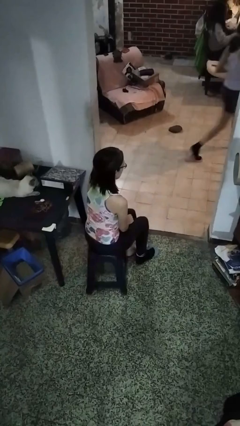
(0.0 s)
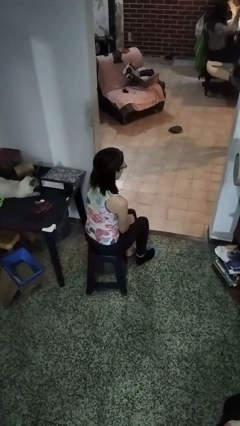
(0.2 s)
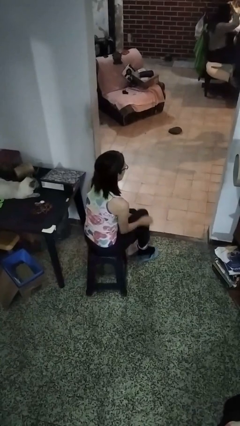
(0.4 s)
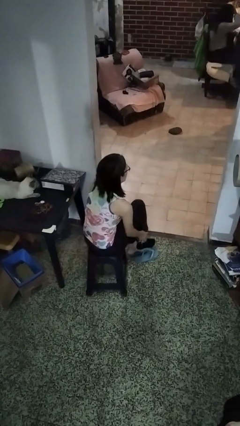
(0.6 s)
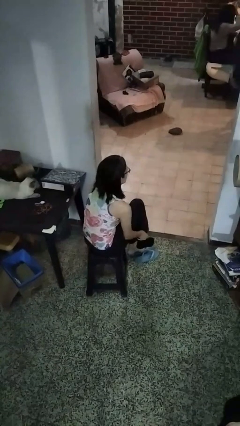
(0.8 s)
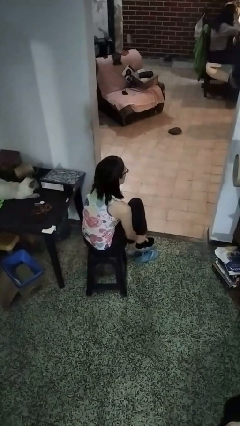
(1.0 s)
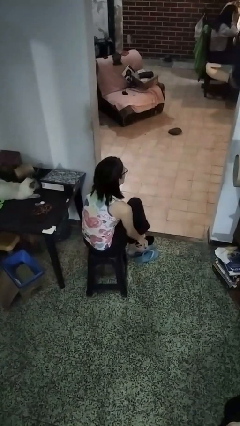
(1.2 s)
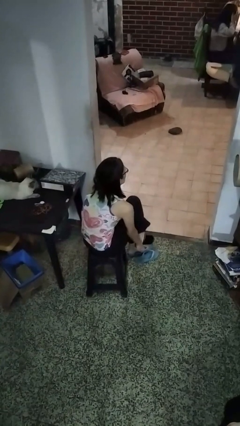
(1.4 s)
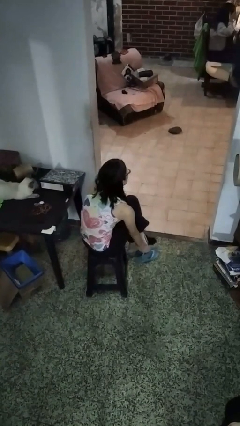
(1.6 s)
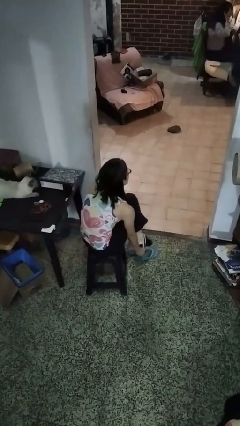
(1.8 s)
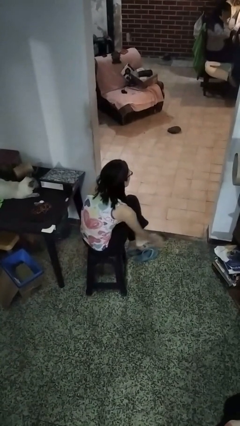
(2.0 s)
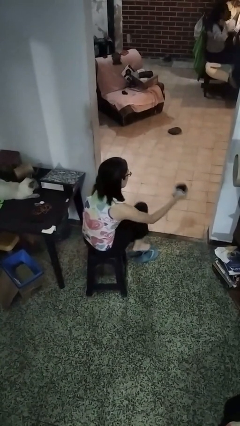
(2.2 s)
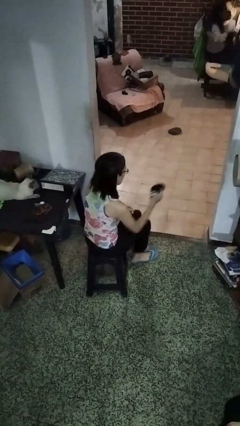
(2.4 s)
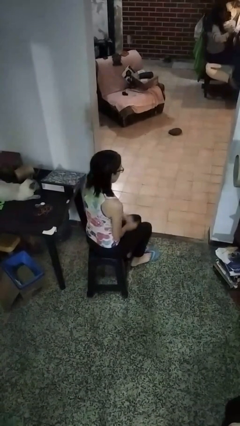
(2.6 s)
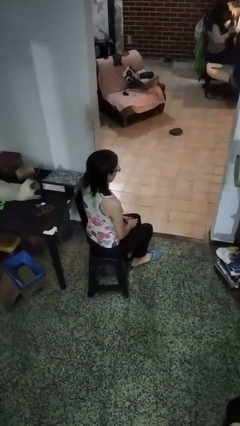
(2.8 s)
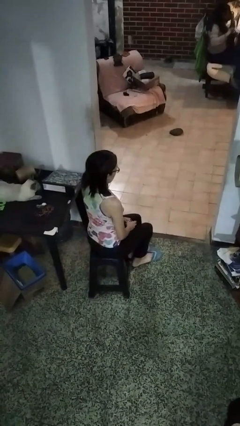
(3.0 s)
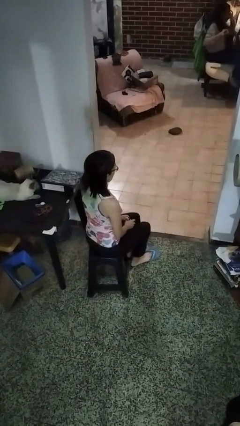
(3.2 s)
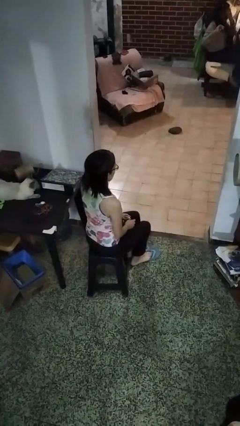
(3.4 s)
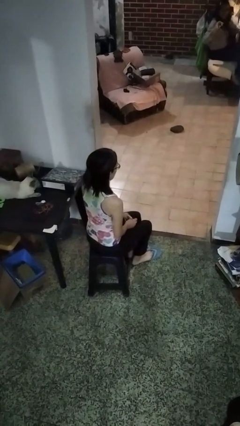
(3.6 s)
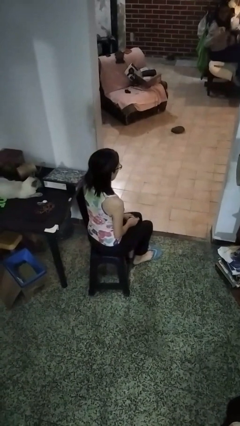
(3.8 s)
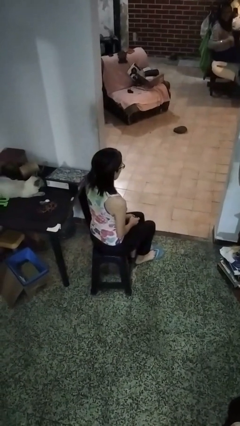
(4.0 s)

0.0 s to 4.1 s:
person takes off socks

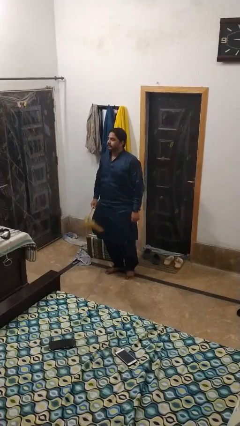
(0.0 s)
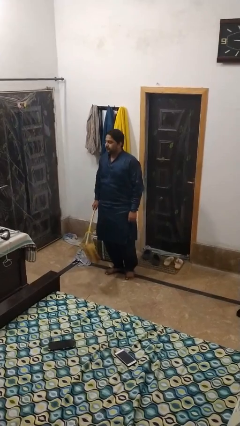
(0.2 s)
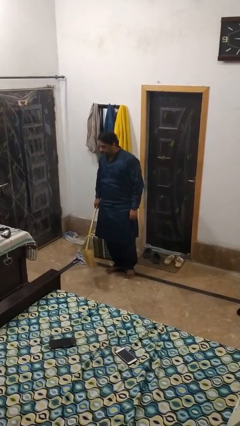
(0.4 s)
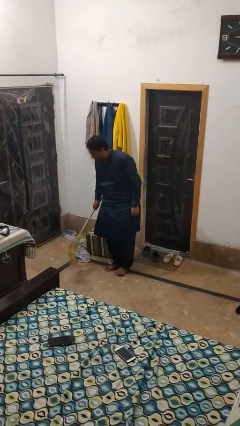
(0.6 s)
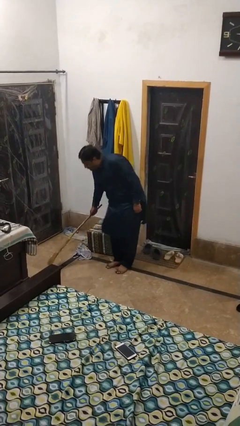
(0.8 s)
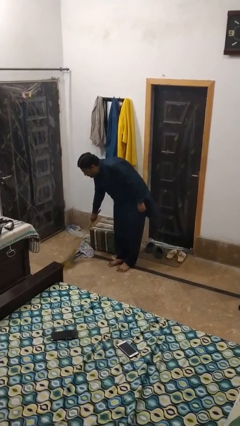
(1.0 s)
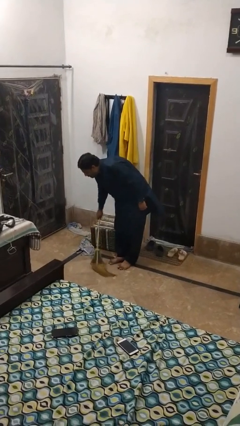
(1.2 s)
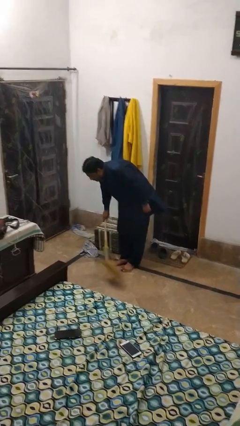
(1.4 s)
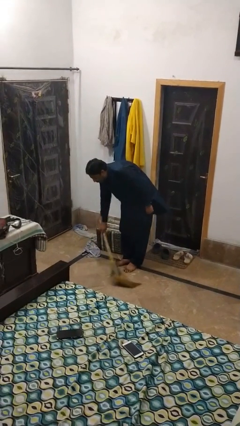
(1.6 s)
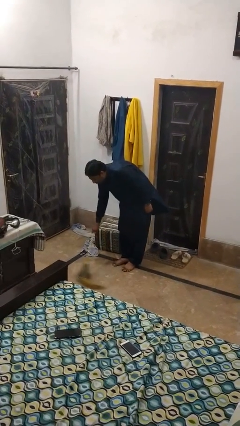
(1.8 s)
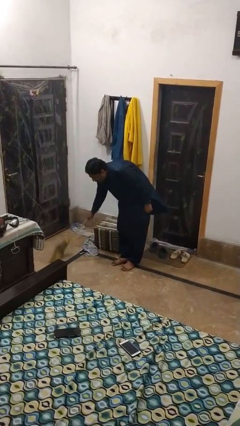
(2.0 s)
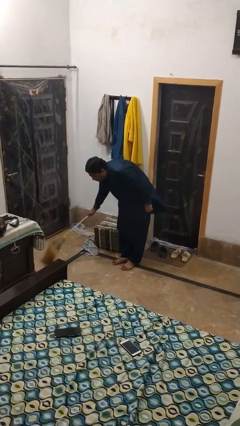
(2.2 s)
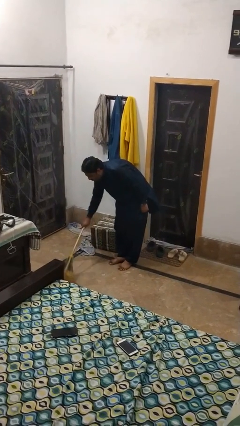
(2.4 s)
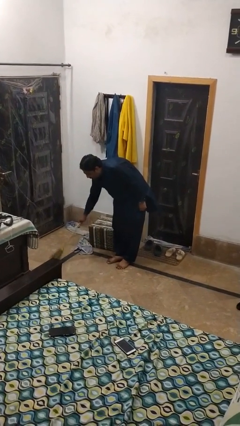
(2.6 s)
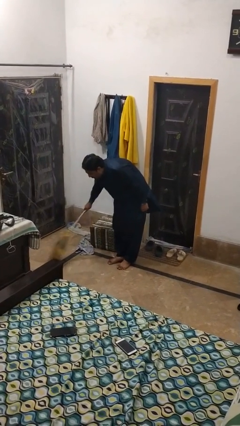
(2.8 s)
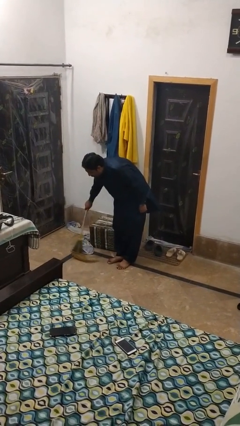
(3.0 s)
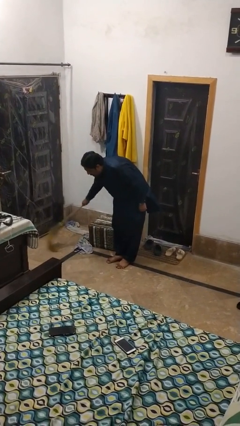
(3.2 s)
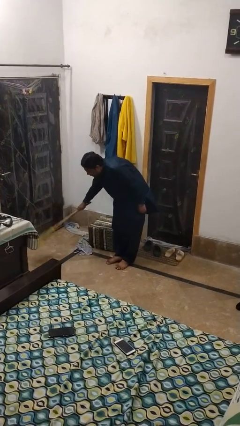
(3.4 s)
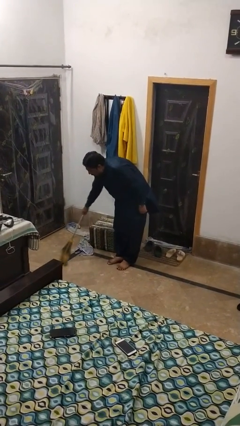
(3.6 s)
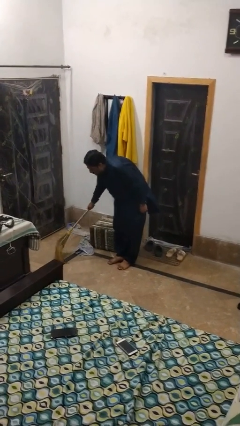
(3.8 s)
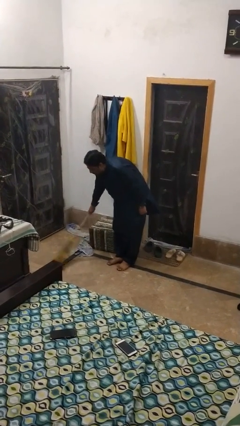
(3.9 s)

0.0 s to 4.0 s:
person sweeps floor

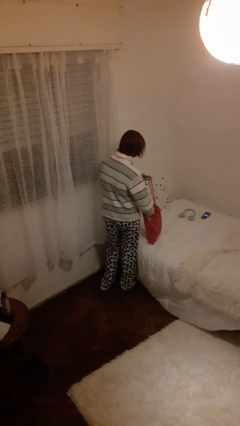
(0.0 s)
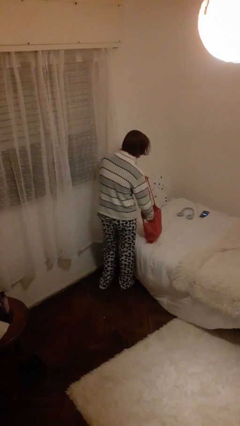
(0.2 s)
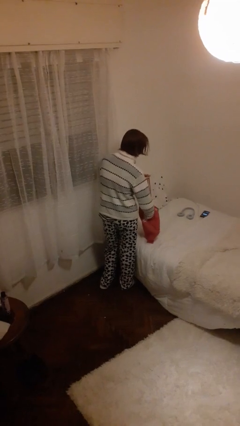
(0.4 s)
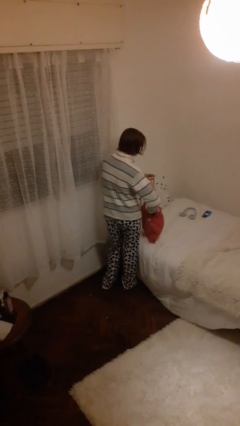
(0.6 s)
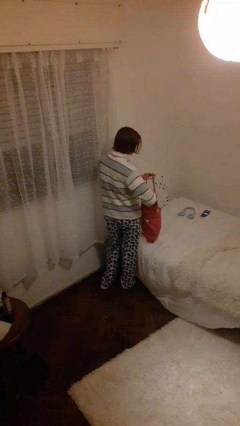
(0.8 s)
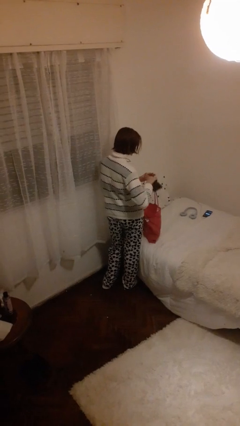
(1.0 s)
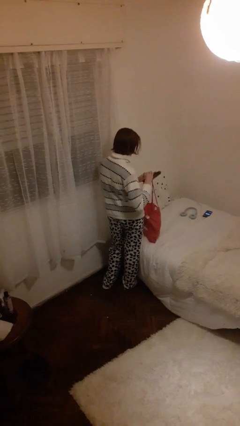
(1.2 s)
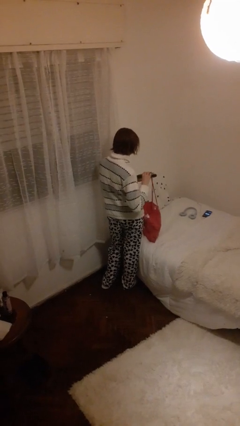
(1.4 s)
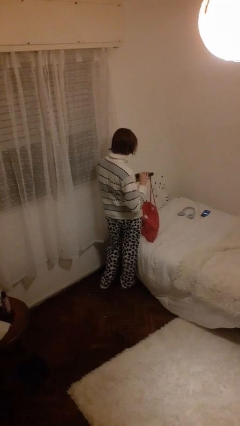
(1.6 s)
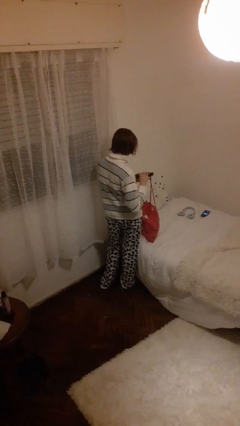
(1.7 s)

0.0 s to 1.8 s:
person takes object from bag

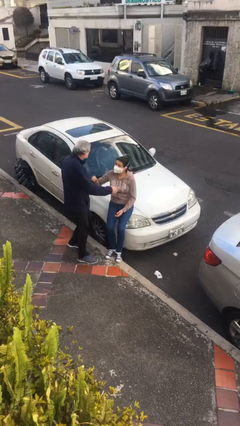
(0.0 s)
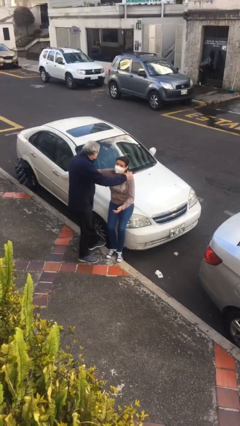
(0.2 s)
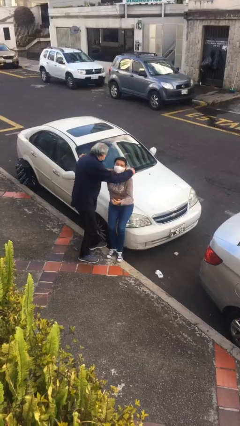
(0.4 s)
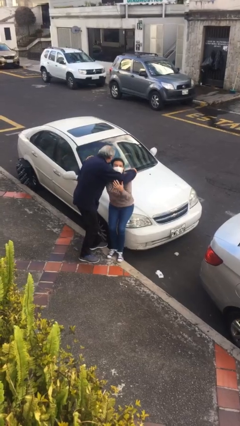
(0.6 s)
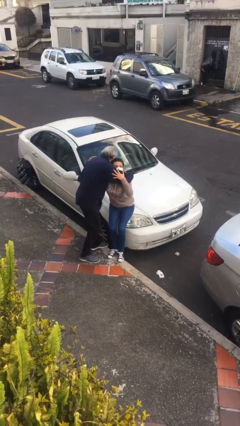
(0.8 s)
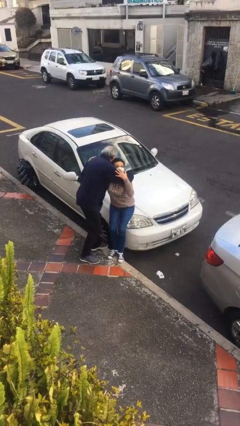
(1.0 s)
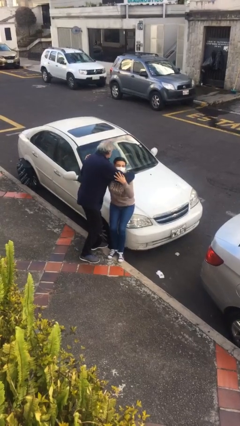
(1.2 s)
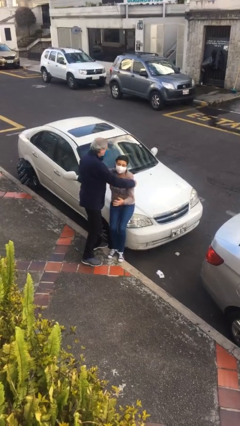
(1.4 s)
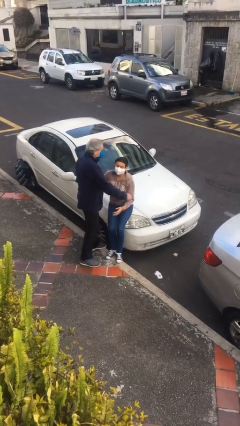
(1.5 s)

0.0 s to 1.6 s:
person embraces person

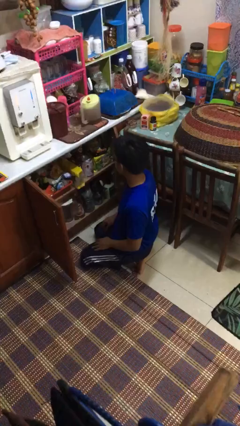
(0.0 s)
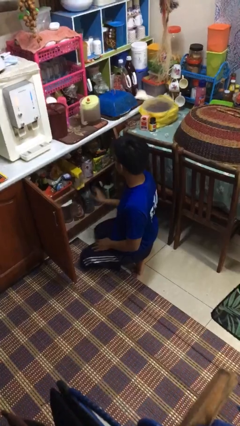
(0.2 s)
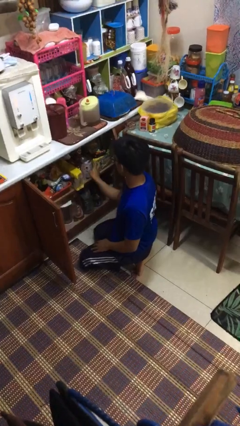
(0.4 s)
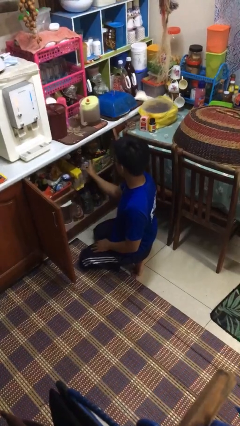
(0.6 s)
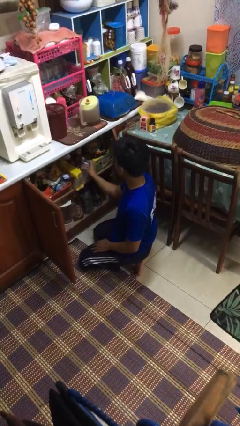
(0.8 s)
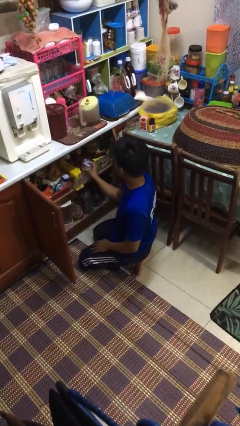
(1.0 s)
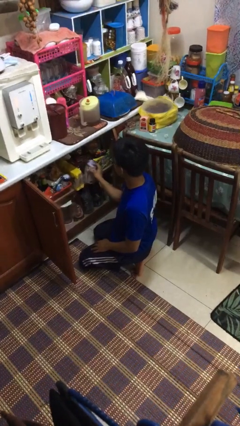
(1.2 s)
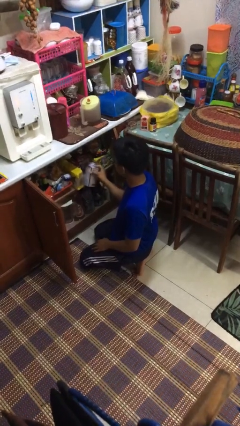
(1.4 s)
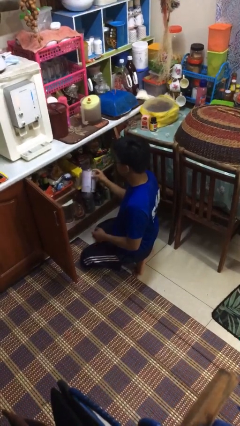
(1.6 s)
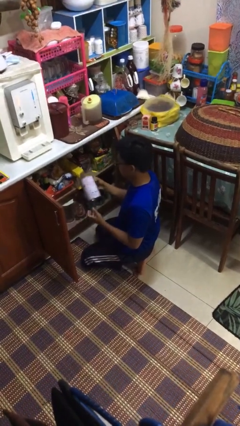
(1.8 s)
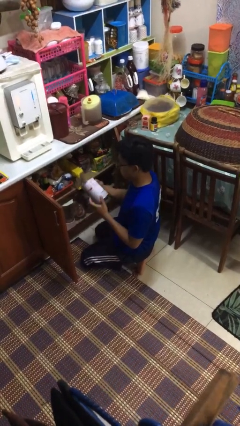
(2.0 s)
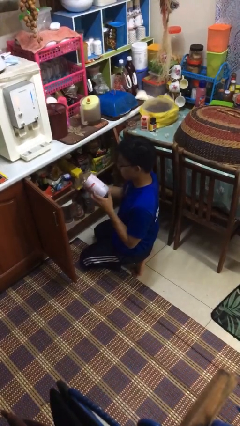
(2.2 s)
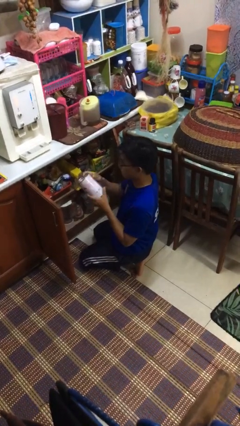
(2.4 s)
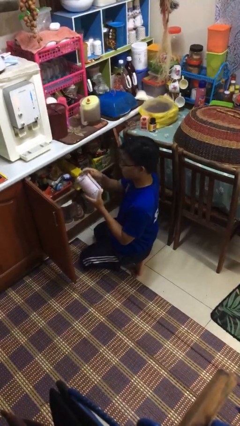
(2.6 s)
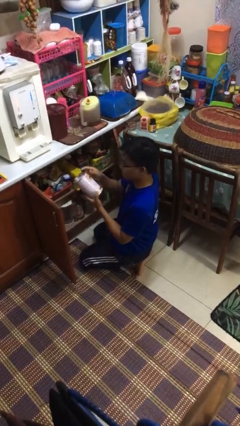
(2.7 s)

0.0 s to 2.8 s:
person takes object from cabinet

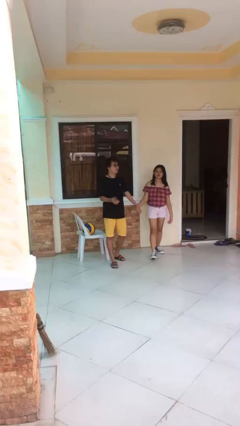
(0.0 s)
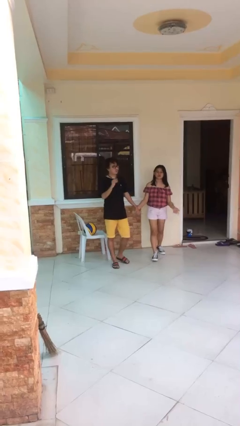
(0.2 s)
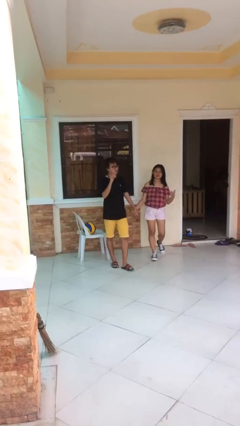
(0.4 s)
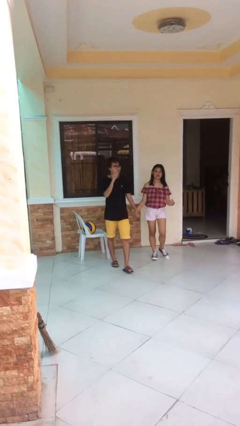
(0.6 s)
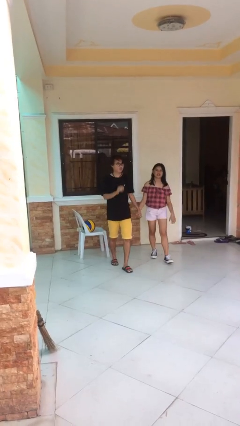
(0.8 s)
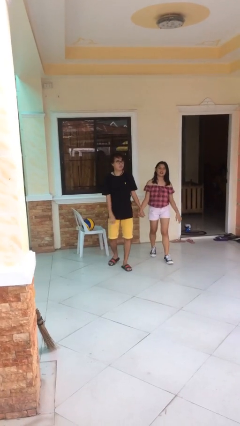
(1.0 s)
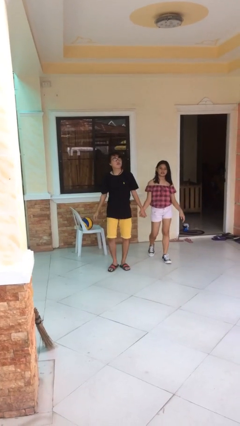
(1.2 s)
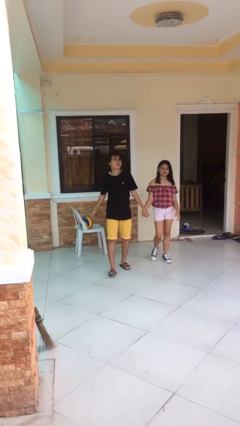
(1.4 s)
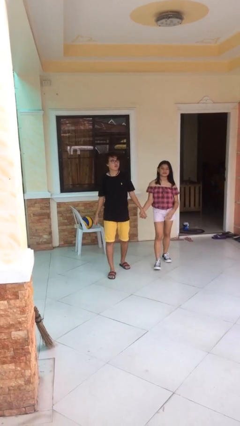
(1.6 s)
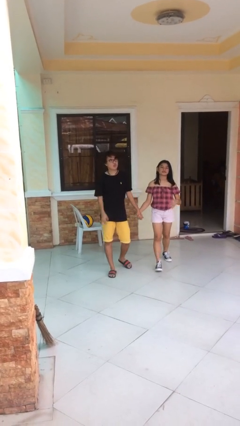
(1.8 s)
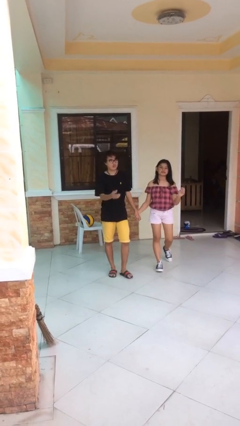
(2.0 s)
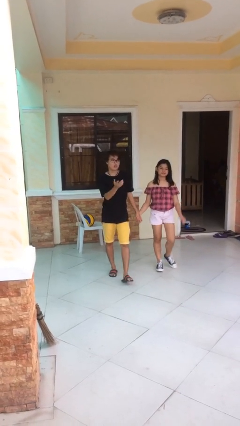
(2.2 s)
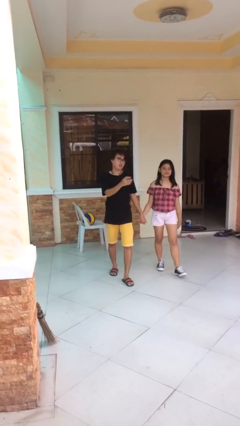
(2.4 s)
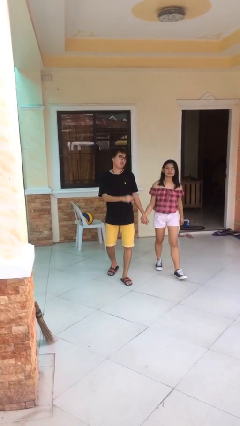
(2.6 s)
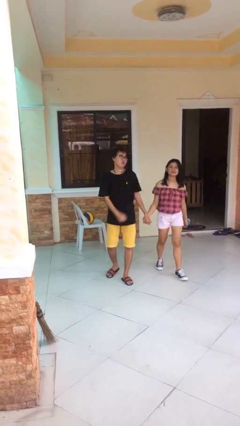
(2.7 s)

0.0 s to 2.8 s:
person holds hand

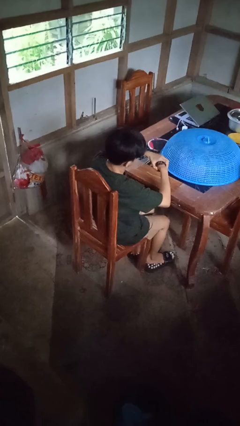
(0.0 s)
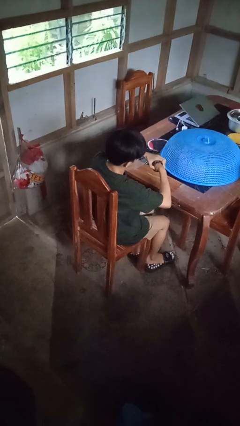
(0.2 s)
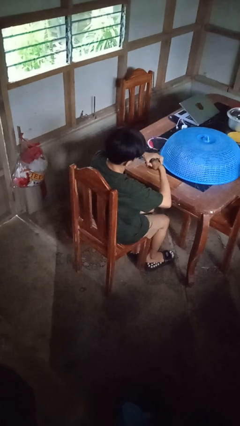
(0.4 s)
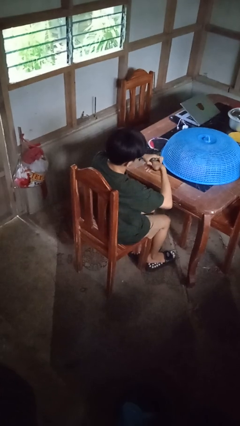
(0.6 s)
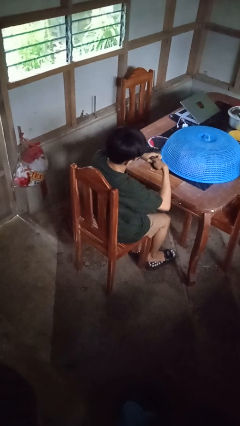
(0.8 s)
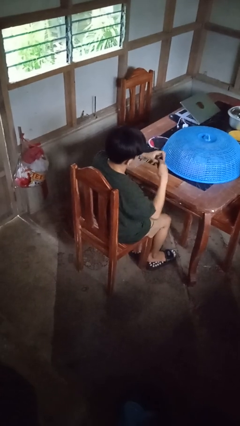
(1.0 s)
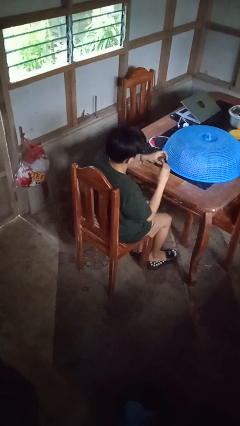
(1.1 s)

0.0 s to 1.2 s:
person takes off wristwatch
